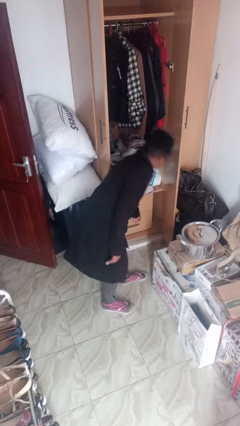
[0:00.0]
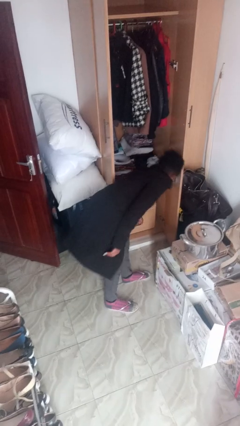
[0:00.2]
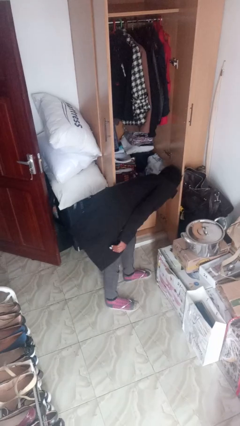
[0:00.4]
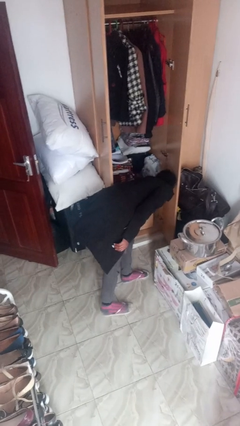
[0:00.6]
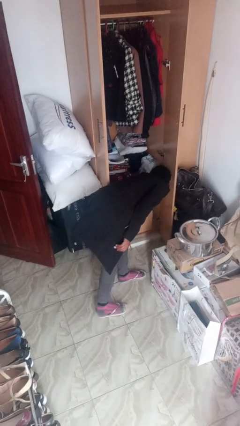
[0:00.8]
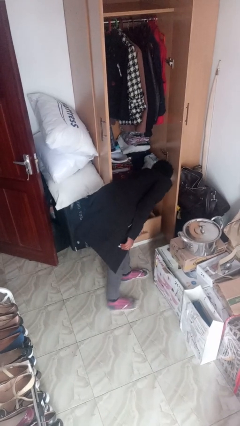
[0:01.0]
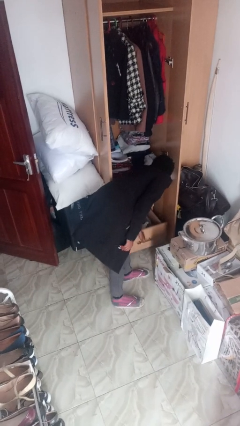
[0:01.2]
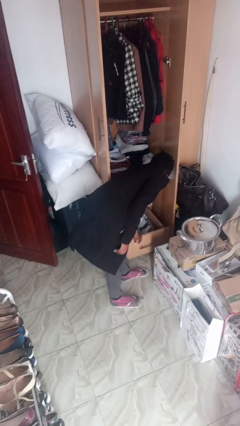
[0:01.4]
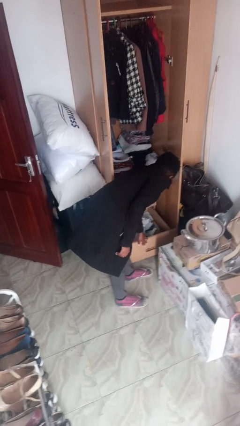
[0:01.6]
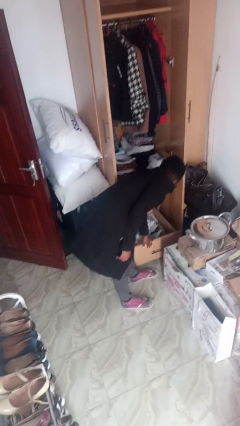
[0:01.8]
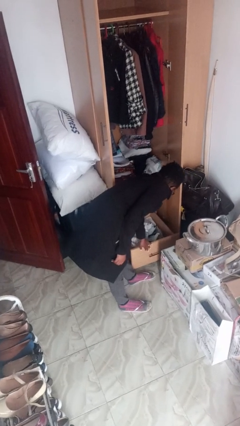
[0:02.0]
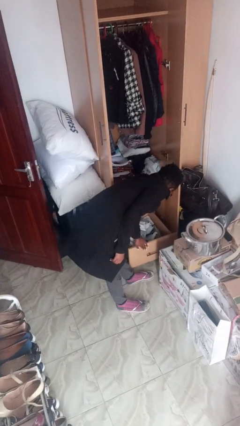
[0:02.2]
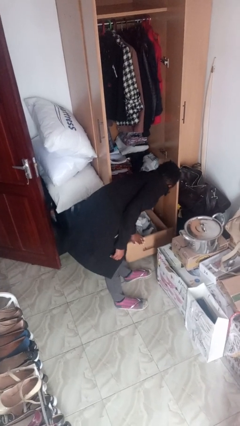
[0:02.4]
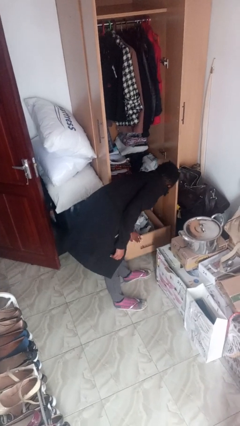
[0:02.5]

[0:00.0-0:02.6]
person opens dresser drawer

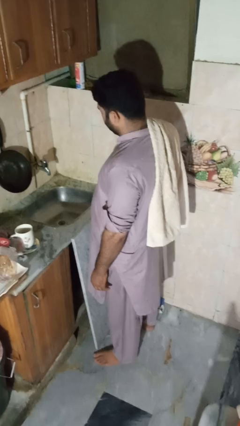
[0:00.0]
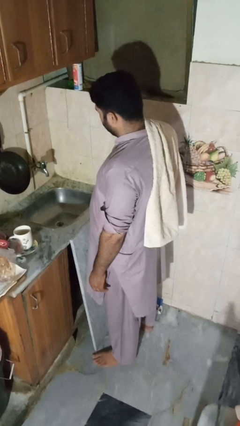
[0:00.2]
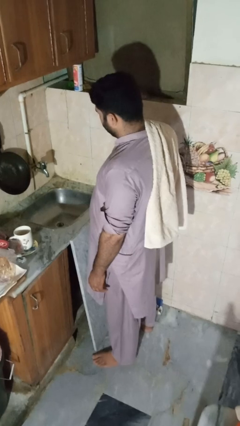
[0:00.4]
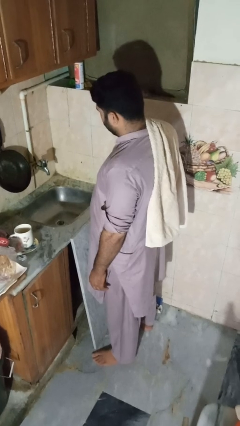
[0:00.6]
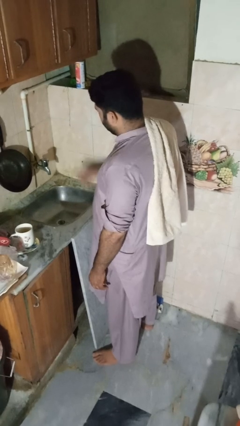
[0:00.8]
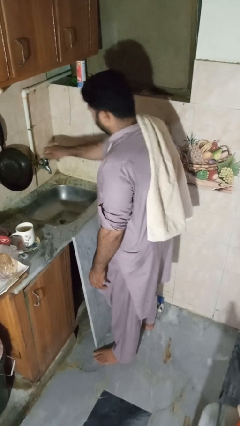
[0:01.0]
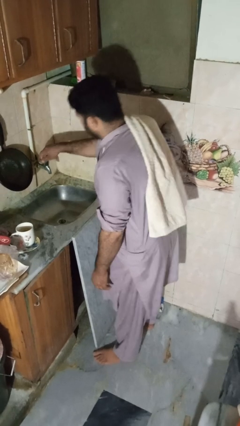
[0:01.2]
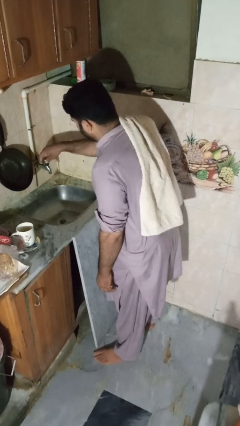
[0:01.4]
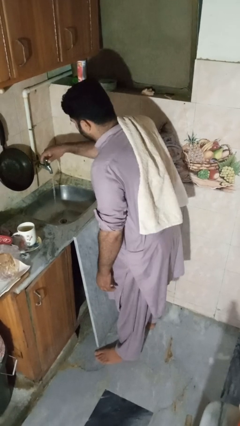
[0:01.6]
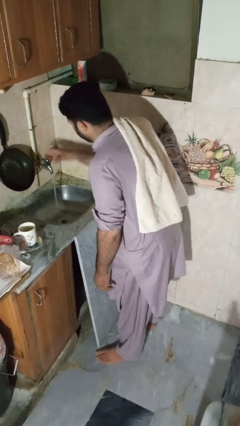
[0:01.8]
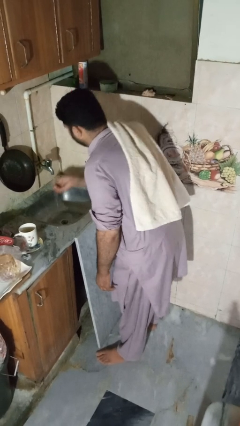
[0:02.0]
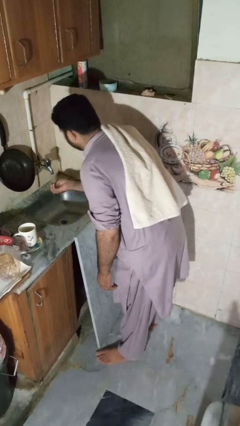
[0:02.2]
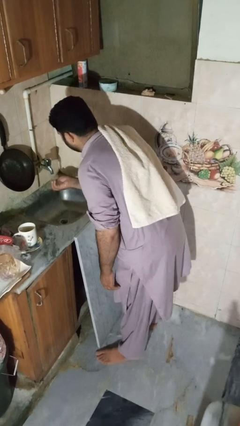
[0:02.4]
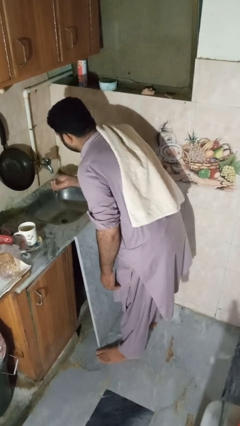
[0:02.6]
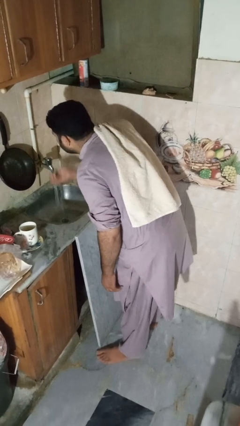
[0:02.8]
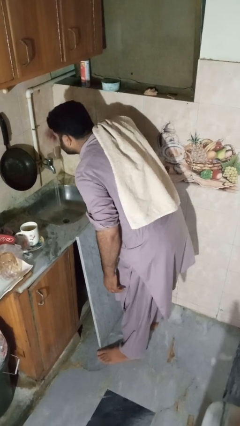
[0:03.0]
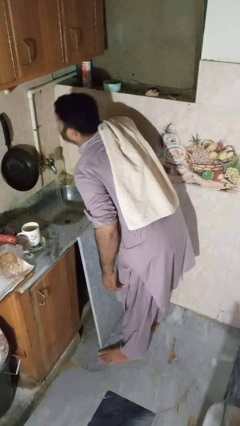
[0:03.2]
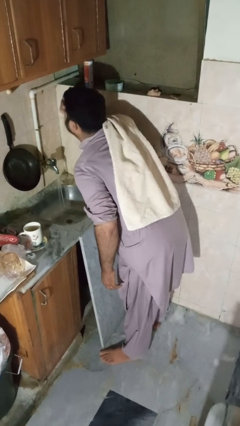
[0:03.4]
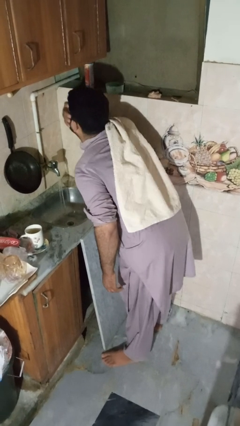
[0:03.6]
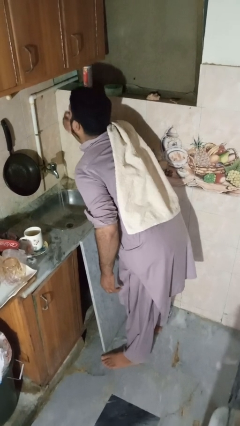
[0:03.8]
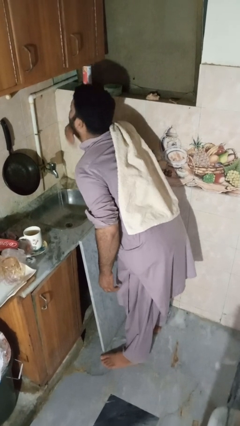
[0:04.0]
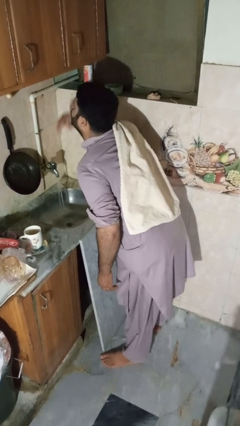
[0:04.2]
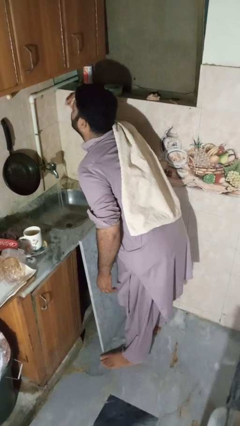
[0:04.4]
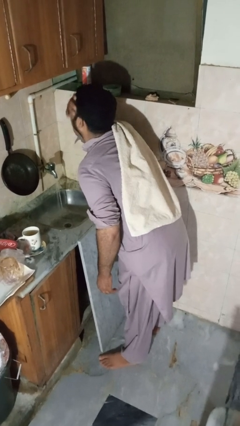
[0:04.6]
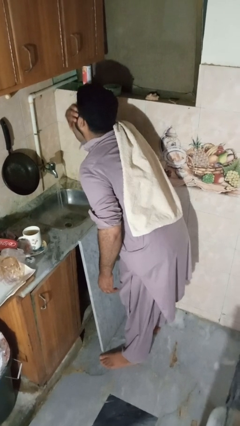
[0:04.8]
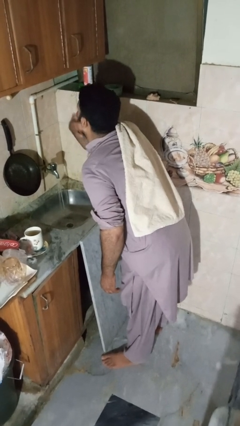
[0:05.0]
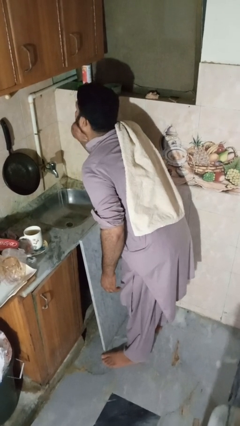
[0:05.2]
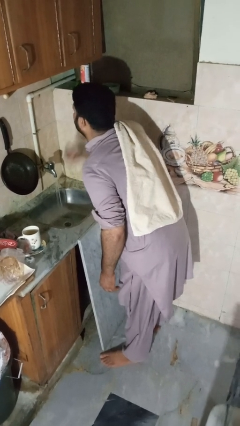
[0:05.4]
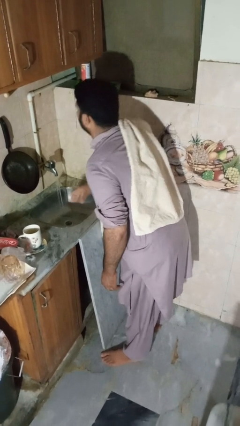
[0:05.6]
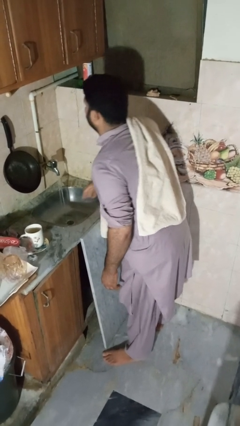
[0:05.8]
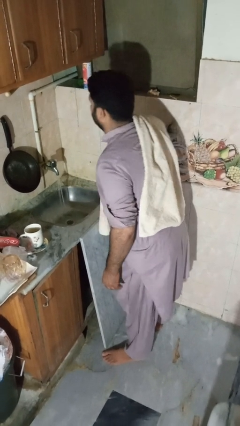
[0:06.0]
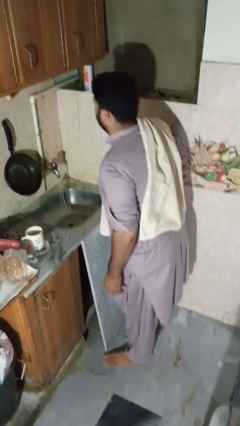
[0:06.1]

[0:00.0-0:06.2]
person washes face

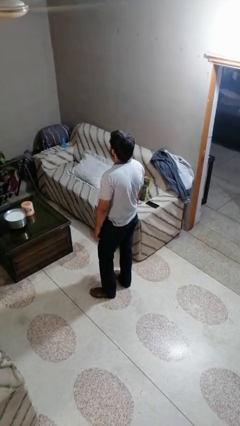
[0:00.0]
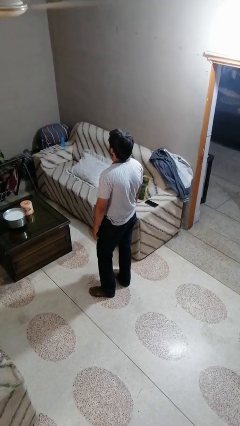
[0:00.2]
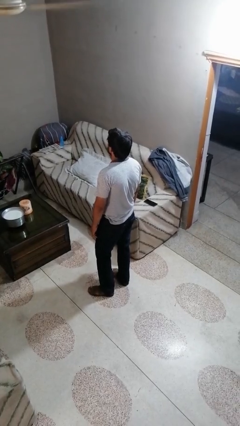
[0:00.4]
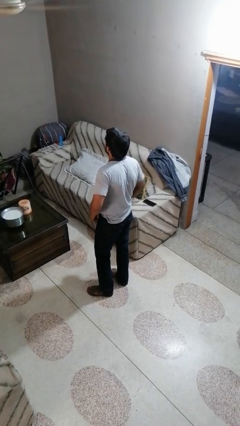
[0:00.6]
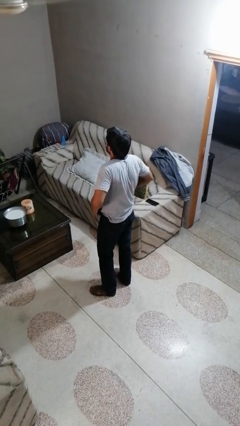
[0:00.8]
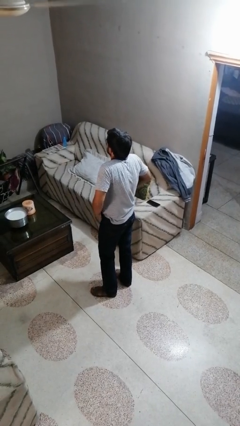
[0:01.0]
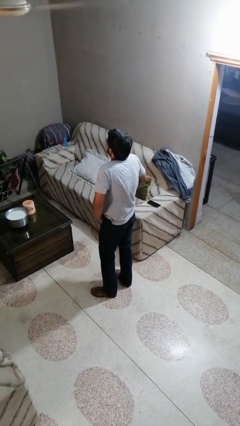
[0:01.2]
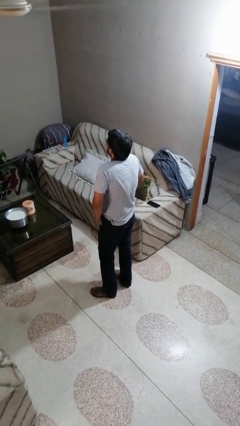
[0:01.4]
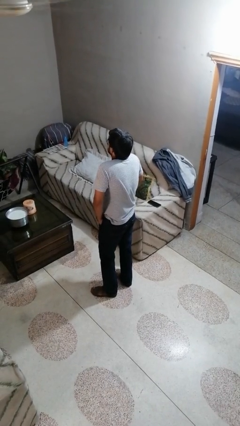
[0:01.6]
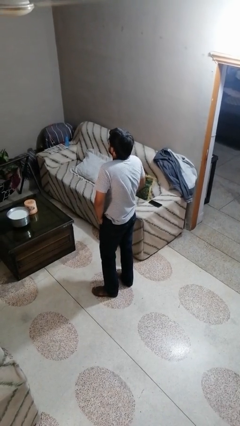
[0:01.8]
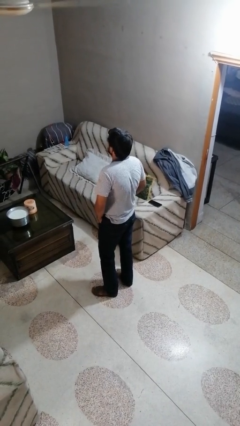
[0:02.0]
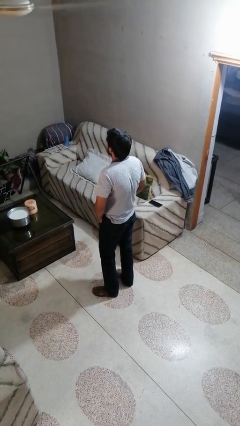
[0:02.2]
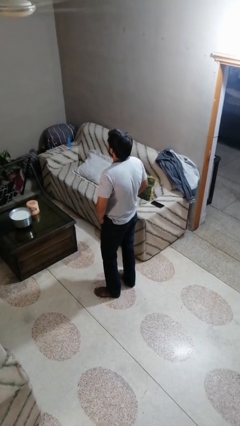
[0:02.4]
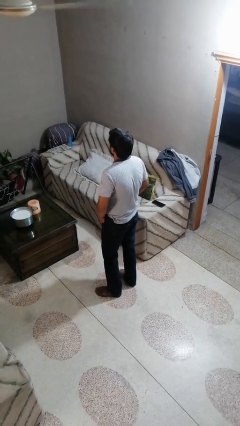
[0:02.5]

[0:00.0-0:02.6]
person puts hands in back pockets

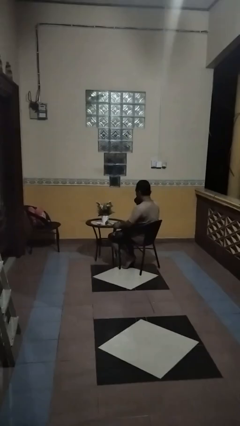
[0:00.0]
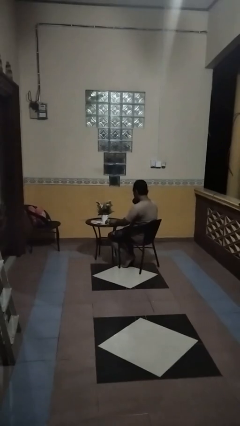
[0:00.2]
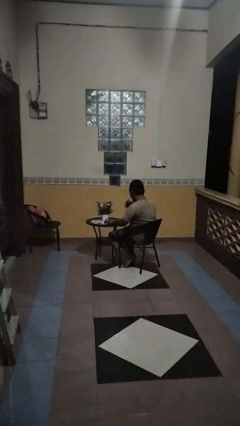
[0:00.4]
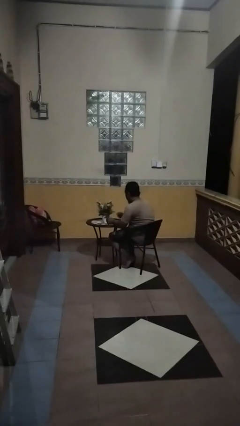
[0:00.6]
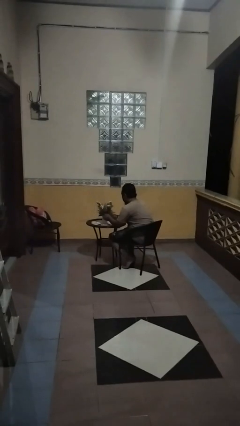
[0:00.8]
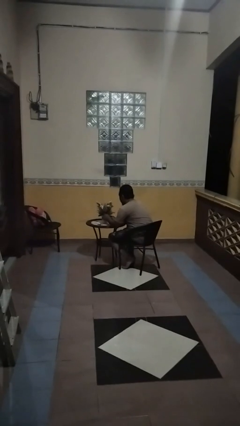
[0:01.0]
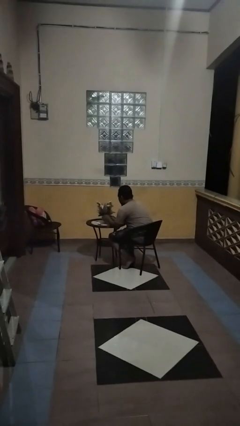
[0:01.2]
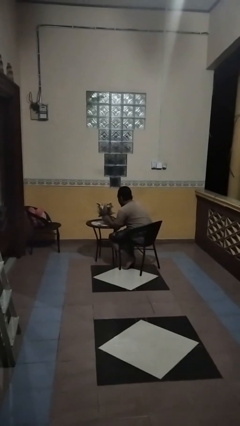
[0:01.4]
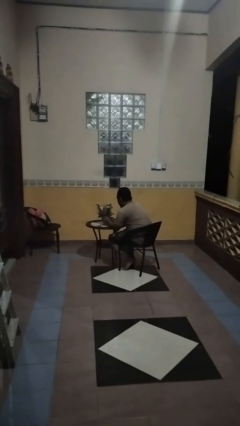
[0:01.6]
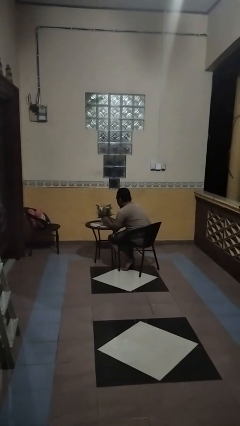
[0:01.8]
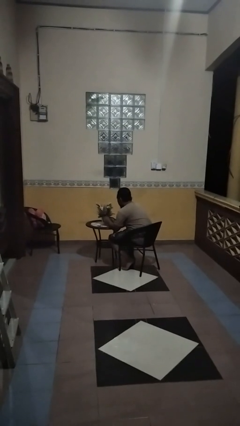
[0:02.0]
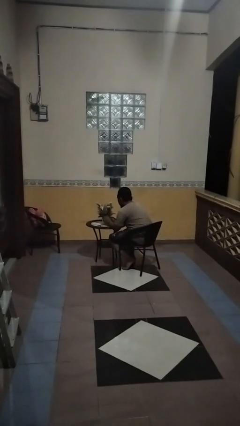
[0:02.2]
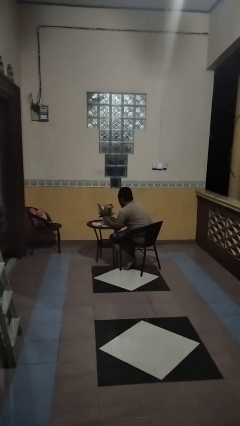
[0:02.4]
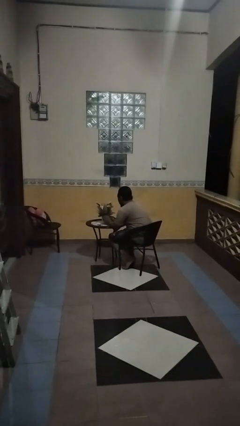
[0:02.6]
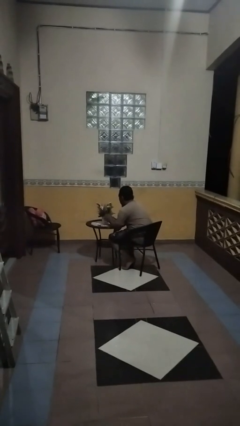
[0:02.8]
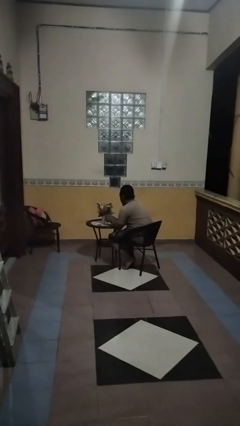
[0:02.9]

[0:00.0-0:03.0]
person arranges flowers in vase

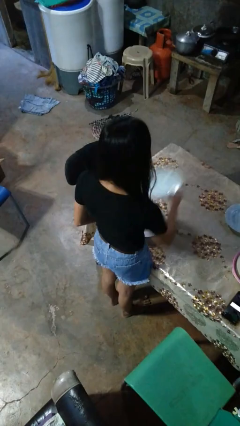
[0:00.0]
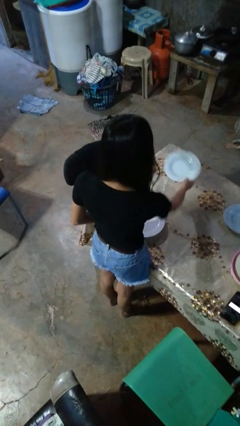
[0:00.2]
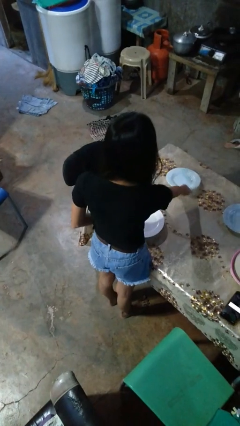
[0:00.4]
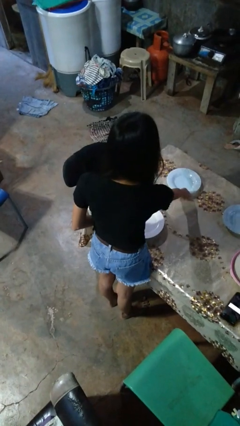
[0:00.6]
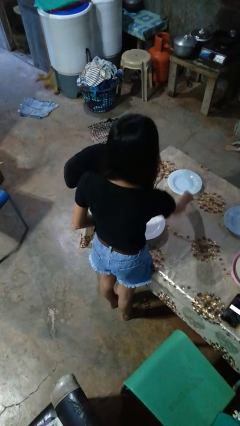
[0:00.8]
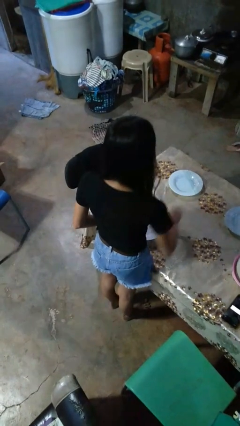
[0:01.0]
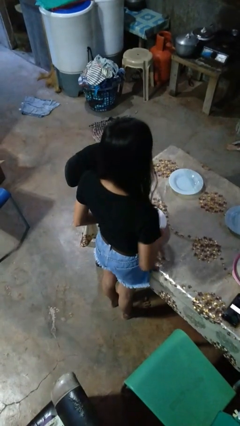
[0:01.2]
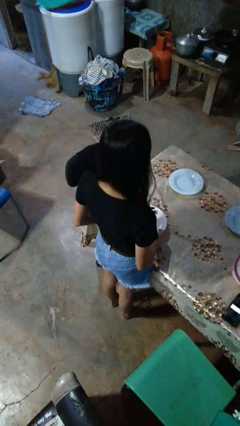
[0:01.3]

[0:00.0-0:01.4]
person sets table

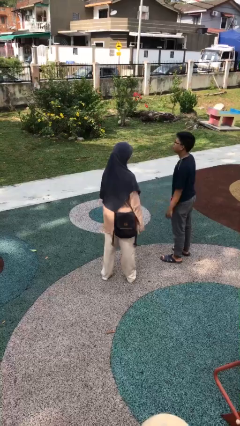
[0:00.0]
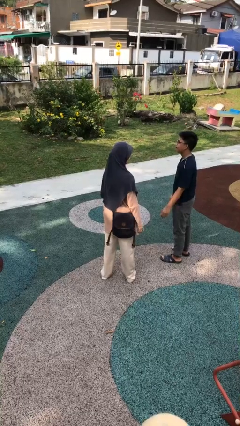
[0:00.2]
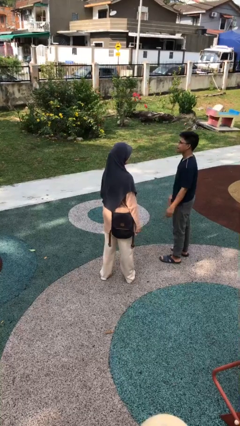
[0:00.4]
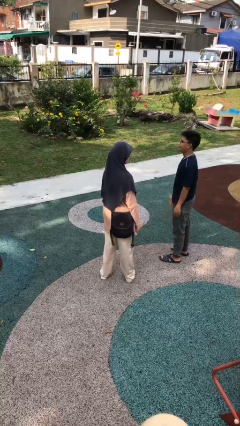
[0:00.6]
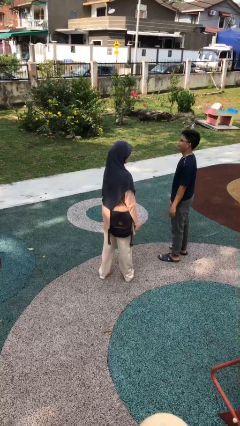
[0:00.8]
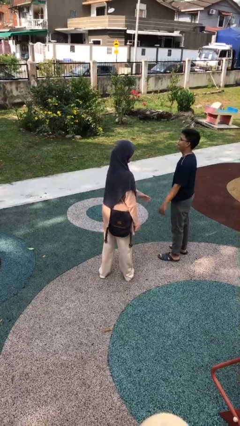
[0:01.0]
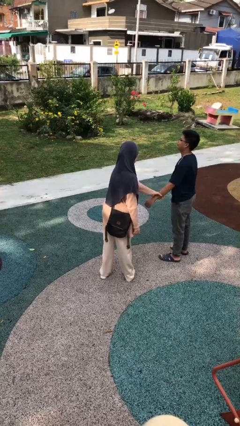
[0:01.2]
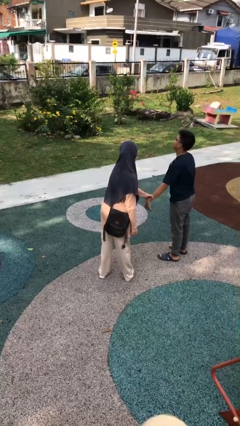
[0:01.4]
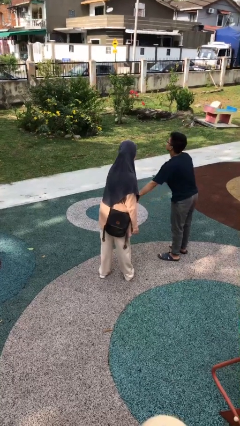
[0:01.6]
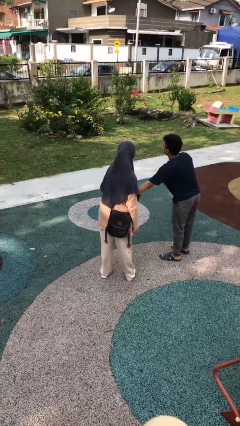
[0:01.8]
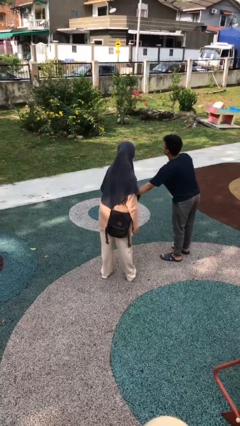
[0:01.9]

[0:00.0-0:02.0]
person grabs person by forearm
